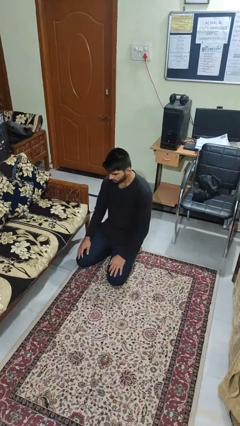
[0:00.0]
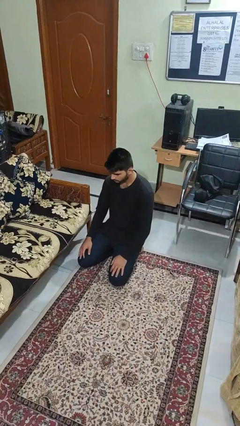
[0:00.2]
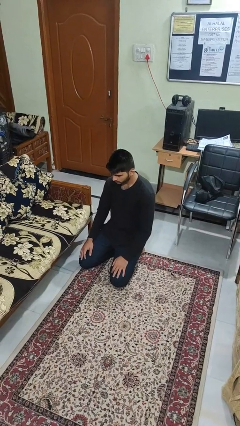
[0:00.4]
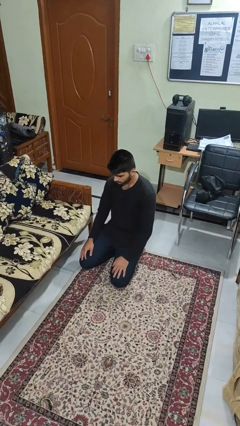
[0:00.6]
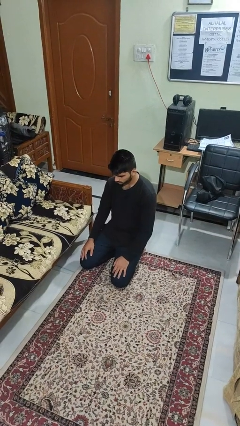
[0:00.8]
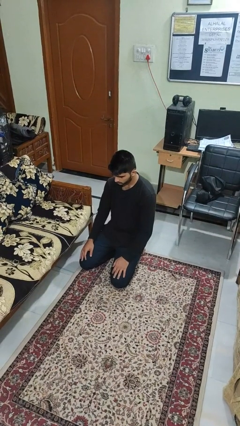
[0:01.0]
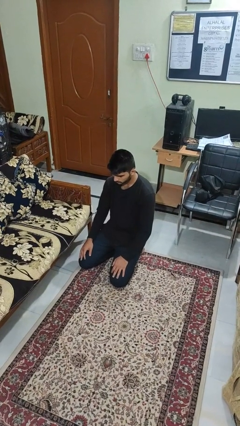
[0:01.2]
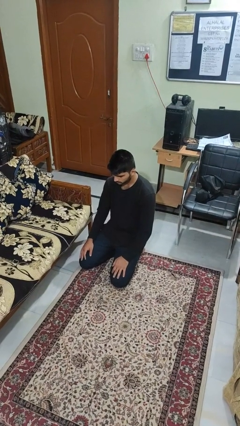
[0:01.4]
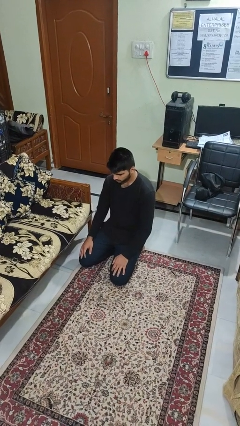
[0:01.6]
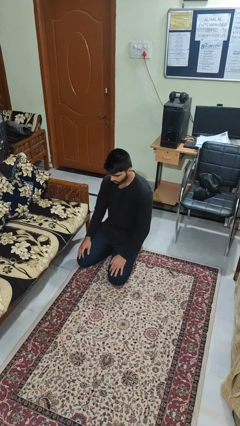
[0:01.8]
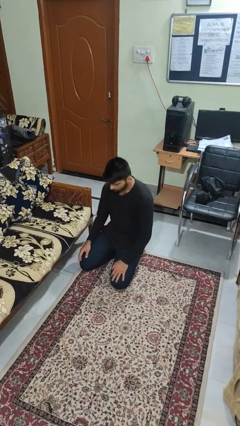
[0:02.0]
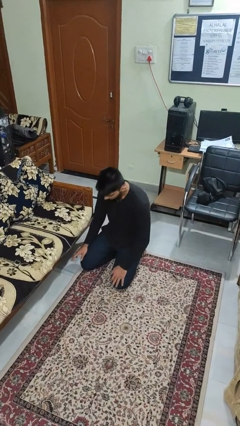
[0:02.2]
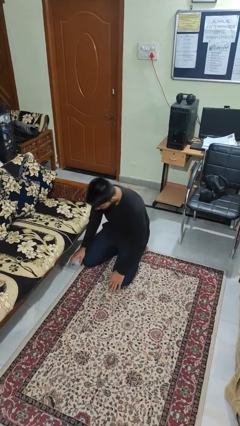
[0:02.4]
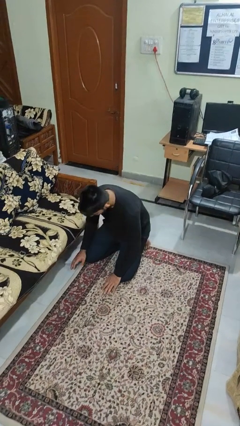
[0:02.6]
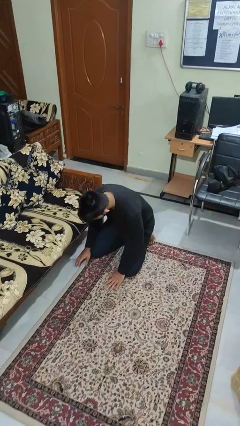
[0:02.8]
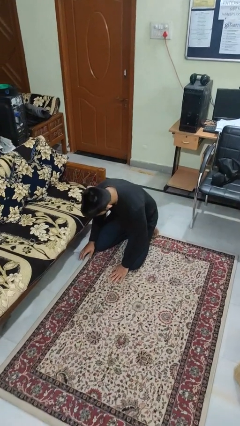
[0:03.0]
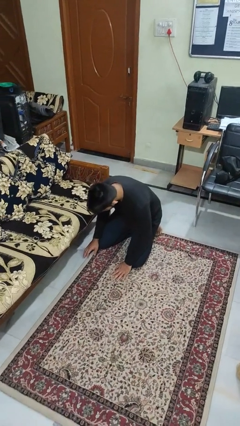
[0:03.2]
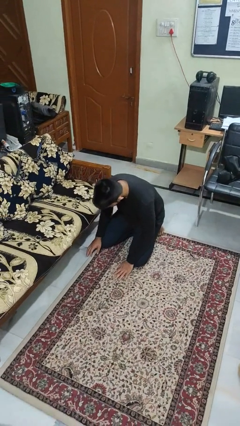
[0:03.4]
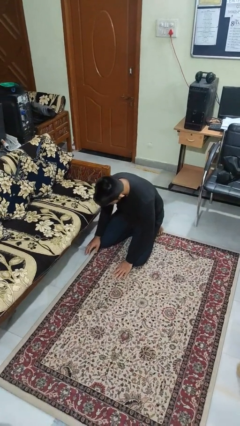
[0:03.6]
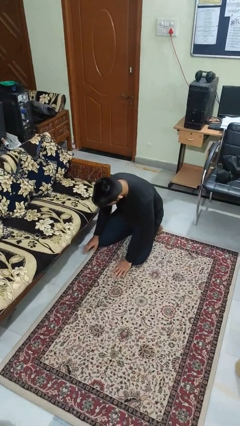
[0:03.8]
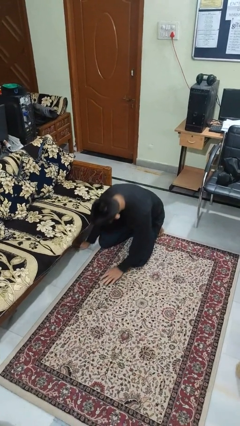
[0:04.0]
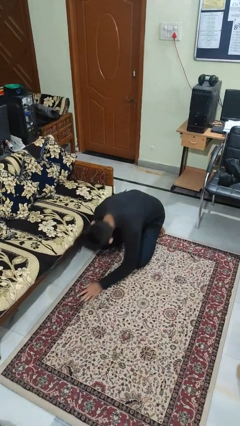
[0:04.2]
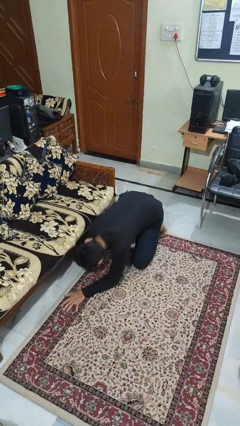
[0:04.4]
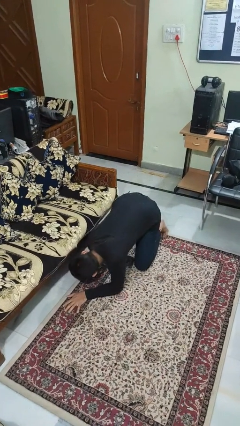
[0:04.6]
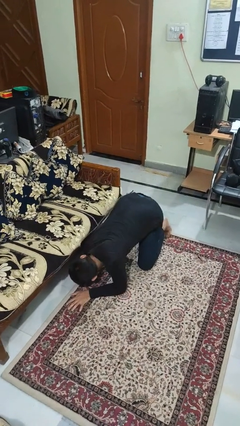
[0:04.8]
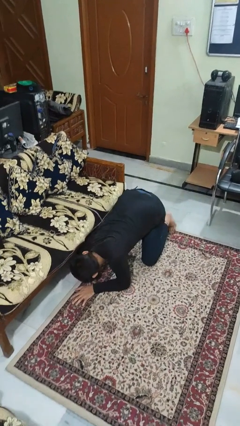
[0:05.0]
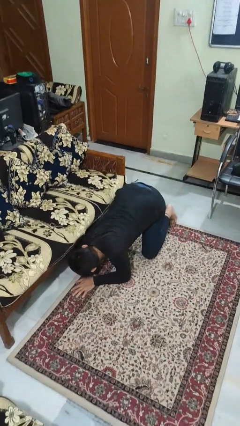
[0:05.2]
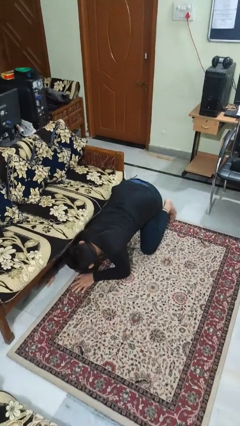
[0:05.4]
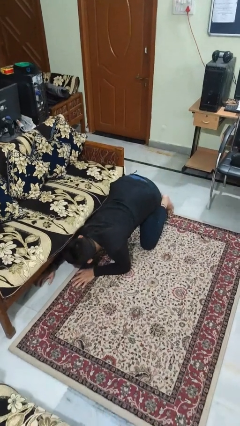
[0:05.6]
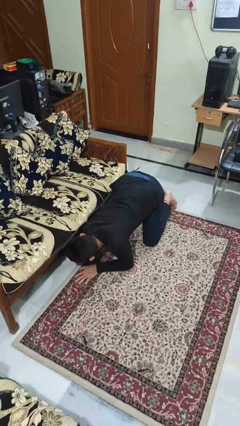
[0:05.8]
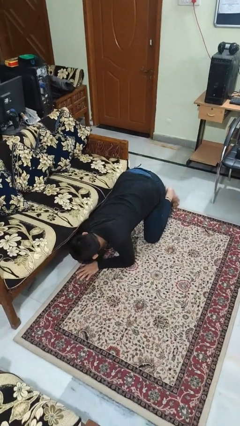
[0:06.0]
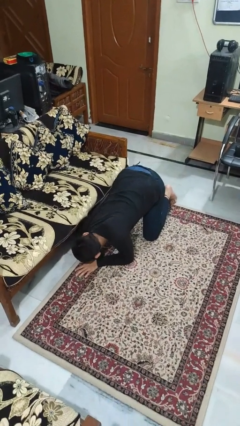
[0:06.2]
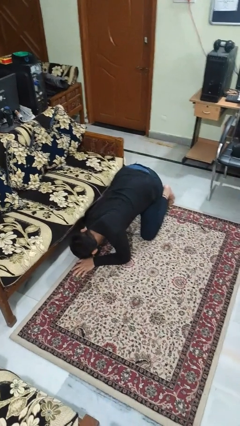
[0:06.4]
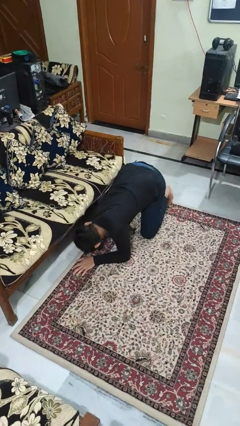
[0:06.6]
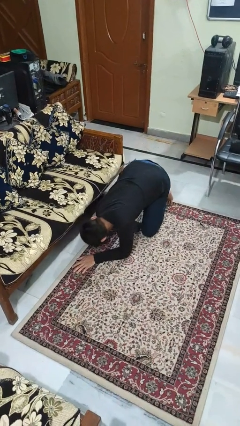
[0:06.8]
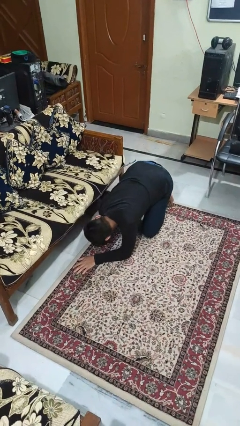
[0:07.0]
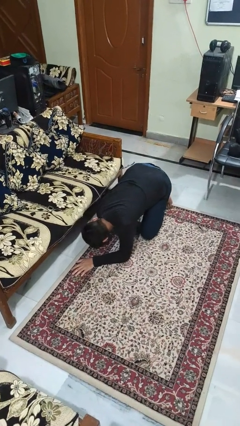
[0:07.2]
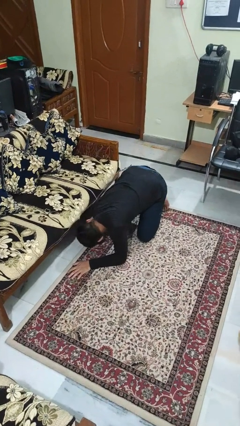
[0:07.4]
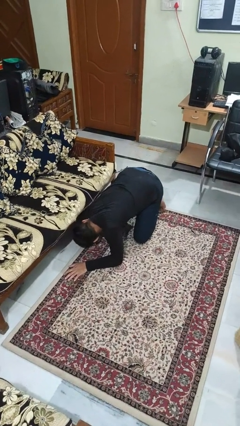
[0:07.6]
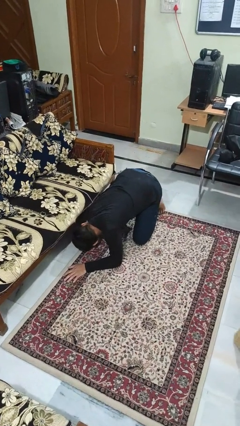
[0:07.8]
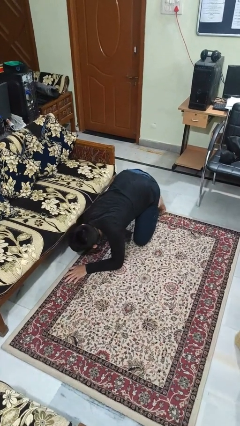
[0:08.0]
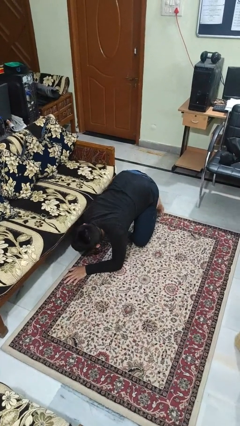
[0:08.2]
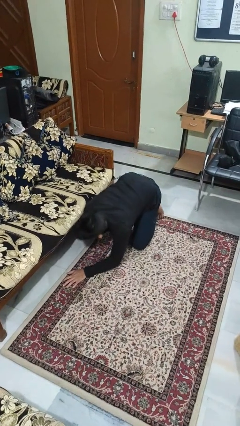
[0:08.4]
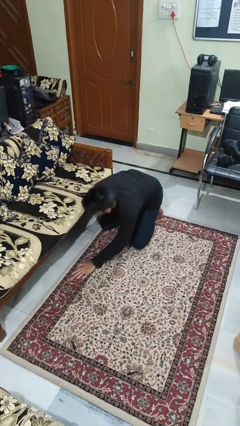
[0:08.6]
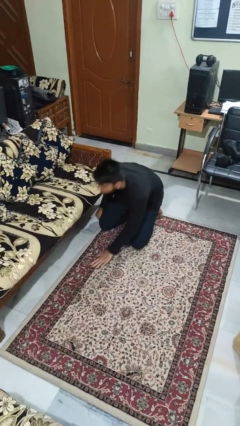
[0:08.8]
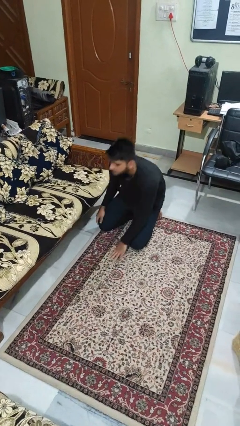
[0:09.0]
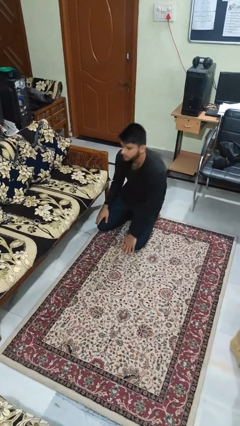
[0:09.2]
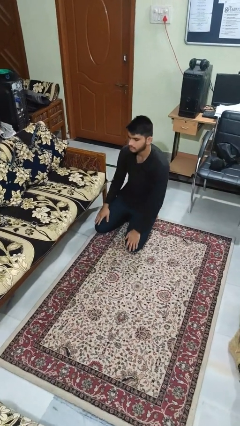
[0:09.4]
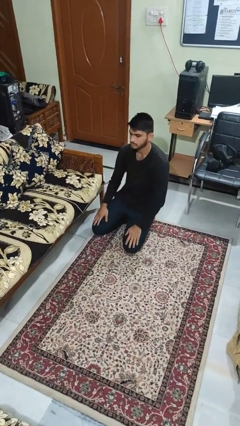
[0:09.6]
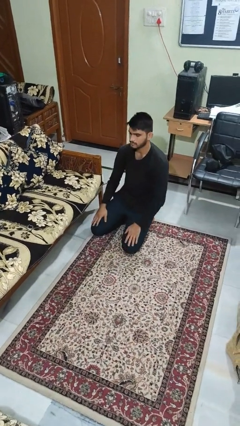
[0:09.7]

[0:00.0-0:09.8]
person searches under couch

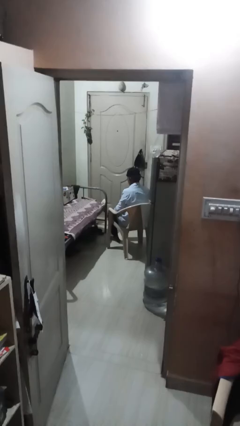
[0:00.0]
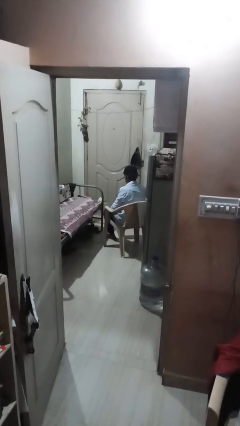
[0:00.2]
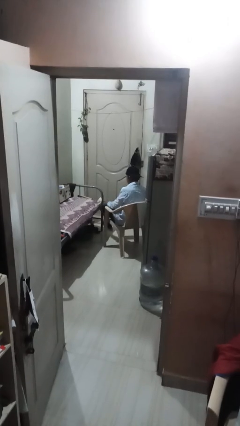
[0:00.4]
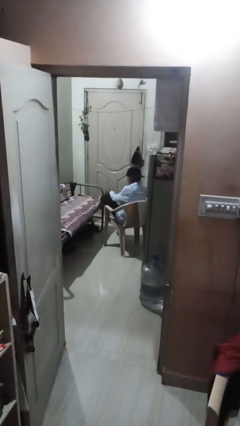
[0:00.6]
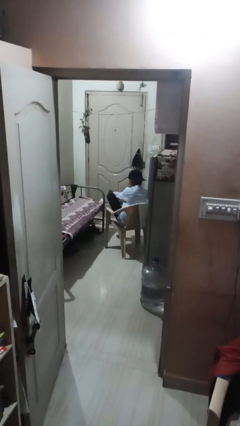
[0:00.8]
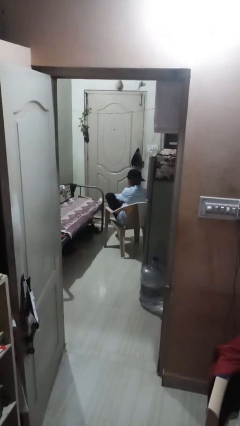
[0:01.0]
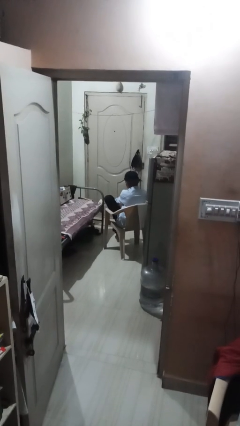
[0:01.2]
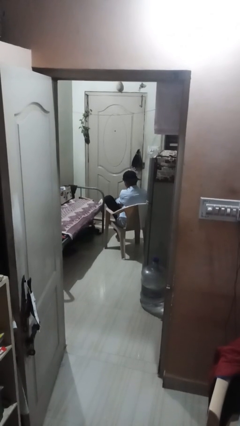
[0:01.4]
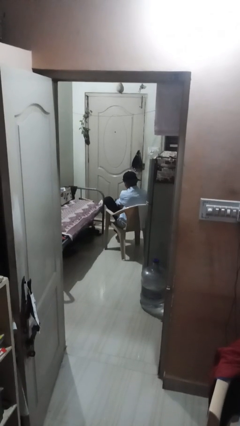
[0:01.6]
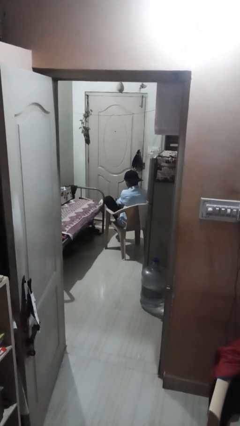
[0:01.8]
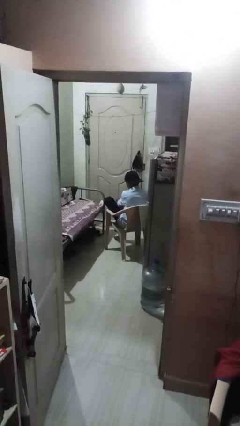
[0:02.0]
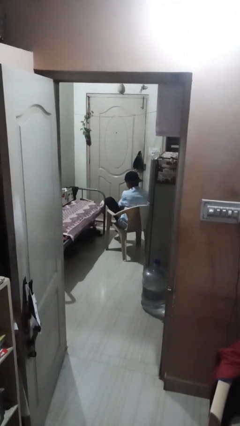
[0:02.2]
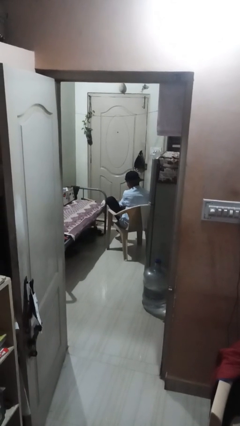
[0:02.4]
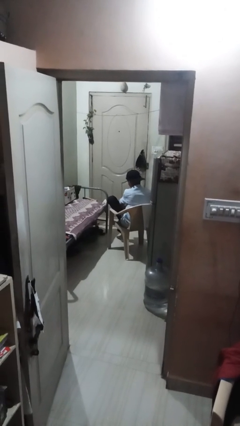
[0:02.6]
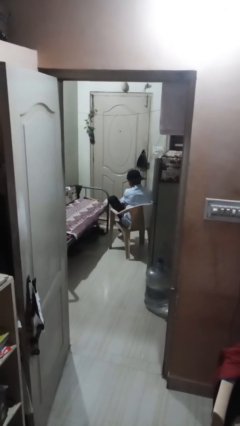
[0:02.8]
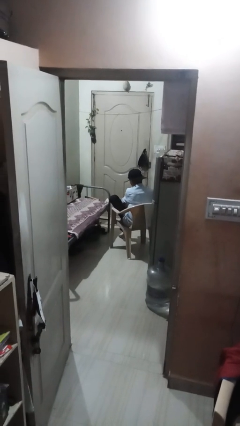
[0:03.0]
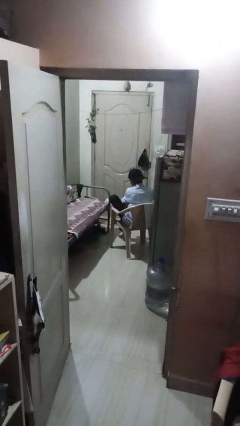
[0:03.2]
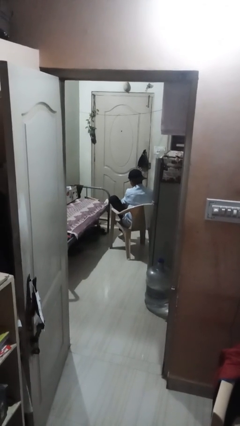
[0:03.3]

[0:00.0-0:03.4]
person rubs foot

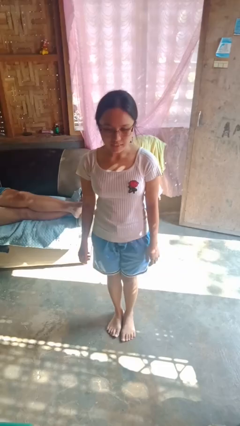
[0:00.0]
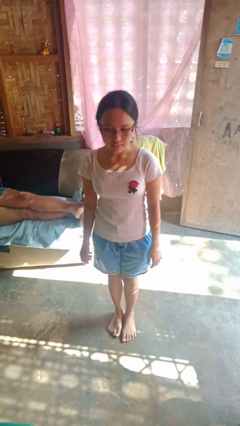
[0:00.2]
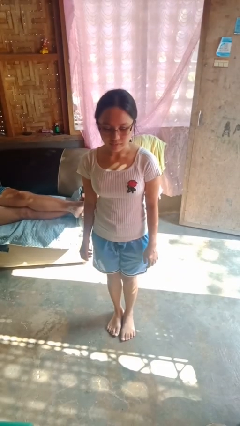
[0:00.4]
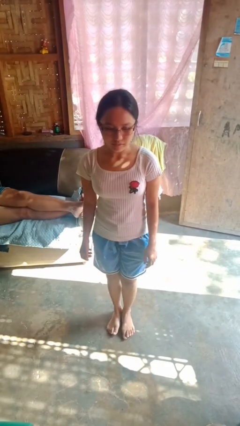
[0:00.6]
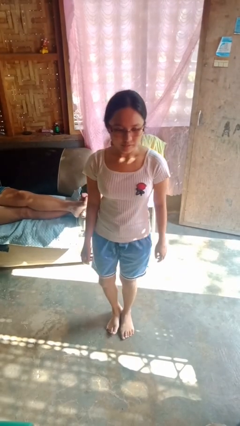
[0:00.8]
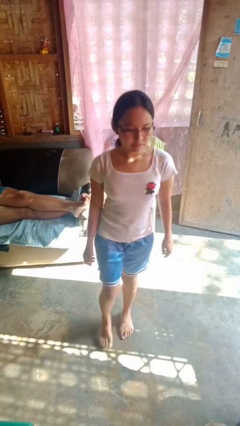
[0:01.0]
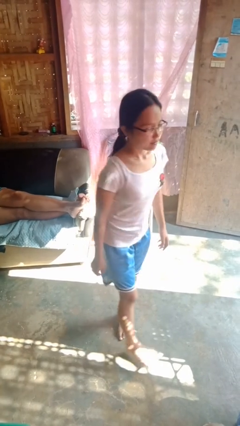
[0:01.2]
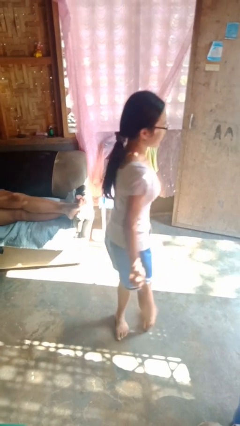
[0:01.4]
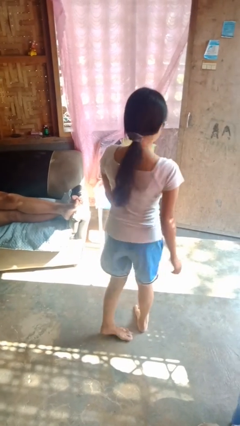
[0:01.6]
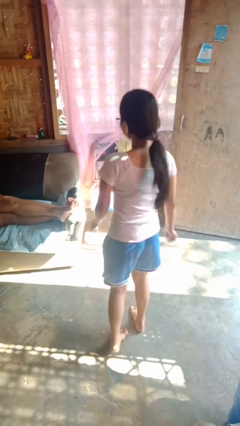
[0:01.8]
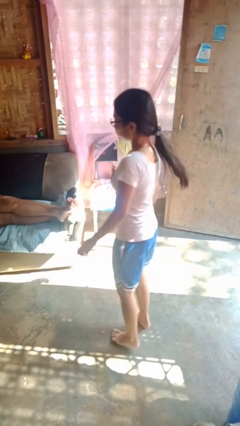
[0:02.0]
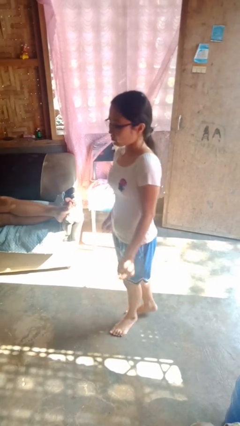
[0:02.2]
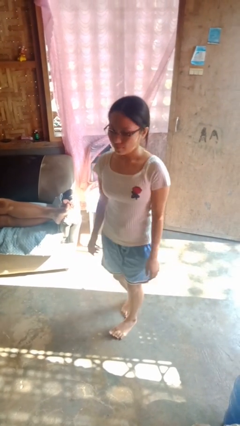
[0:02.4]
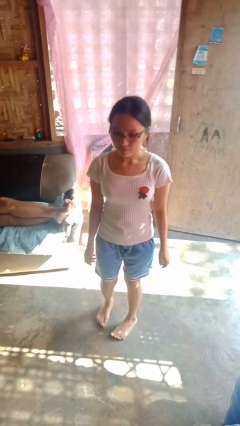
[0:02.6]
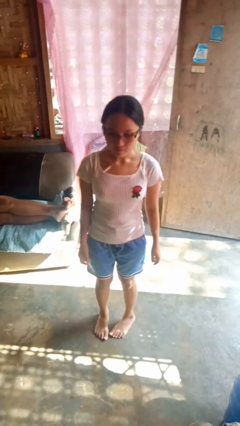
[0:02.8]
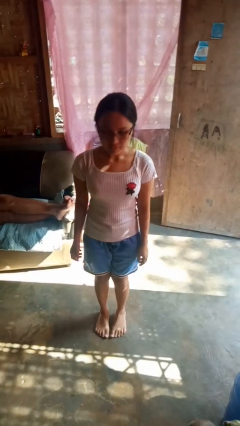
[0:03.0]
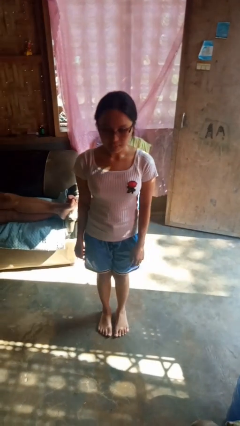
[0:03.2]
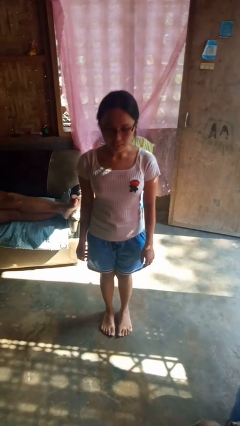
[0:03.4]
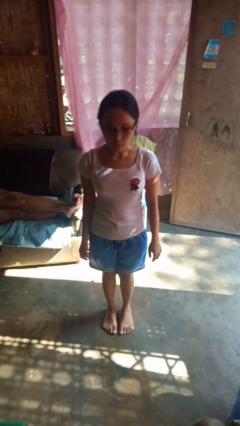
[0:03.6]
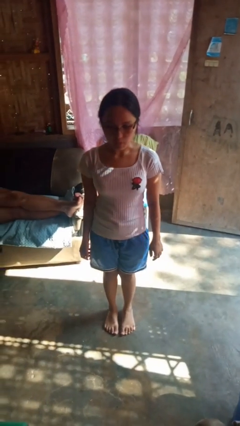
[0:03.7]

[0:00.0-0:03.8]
person twirls

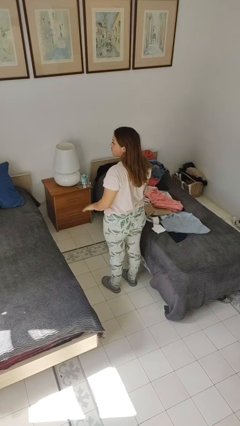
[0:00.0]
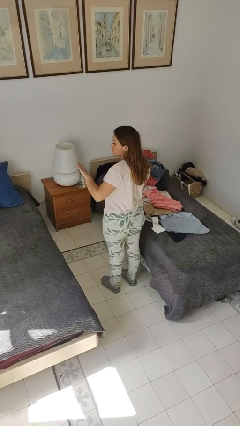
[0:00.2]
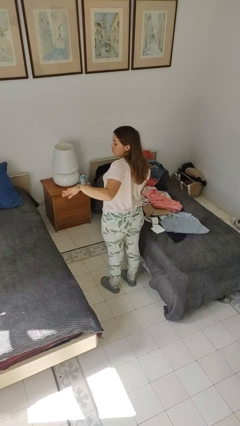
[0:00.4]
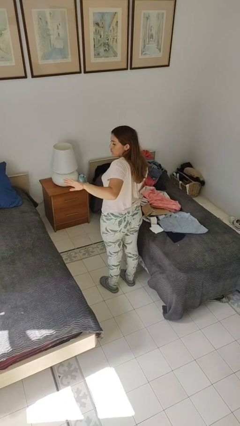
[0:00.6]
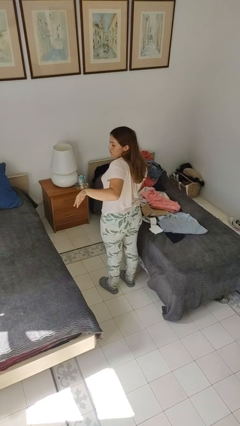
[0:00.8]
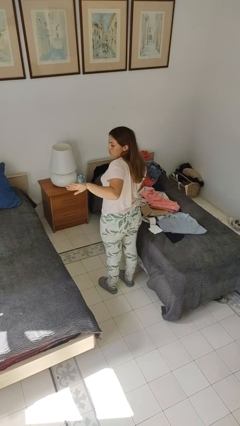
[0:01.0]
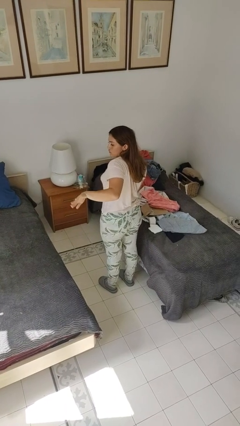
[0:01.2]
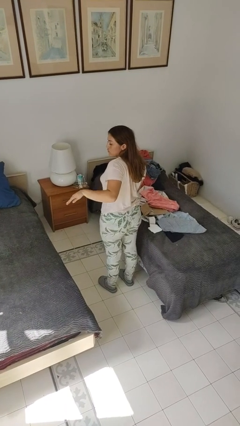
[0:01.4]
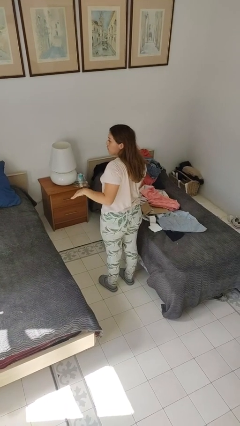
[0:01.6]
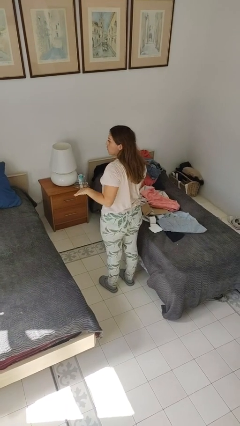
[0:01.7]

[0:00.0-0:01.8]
person gestures behind me
